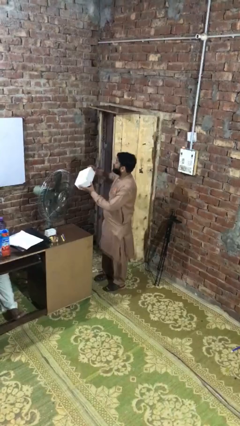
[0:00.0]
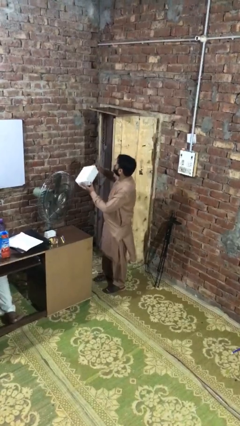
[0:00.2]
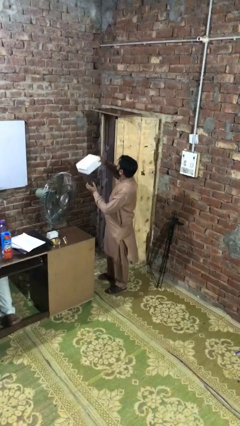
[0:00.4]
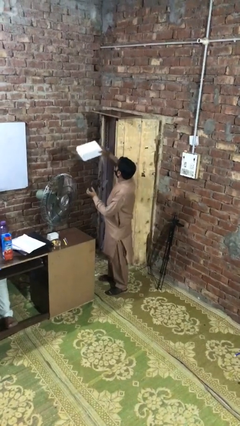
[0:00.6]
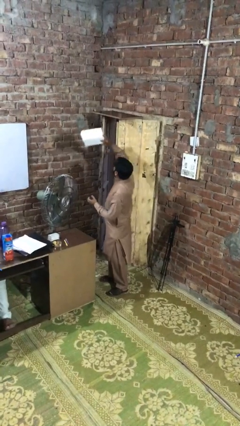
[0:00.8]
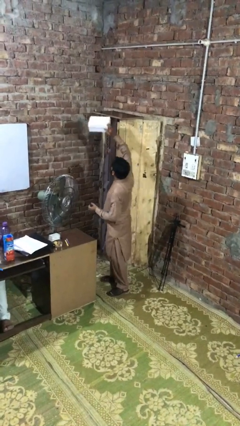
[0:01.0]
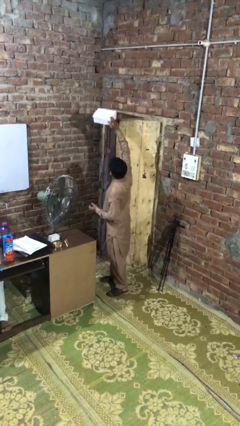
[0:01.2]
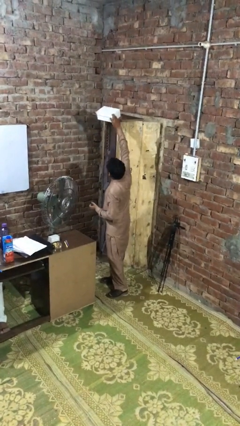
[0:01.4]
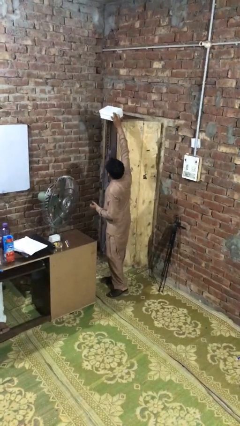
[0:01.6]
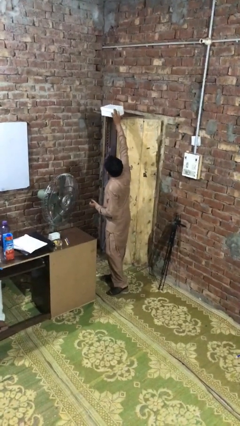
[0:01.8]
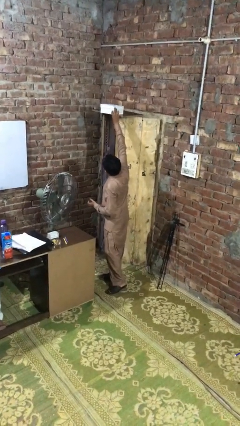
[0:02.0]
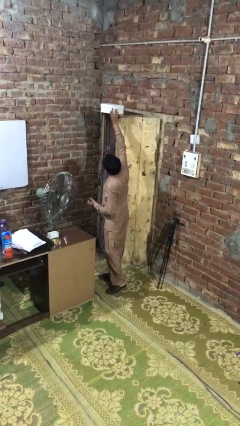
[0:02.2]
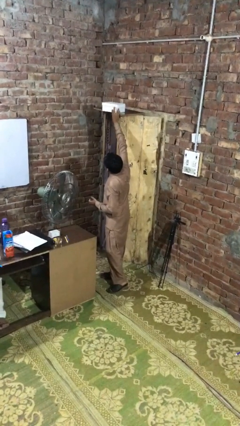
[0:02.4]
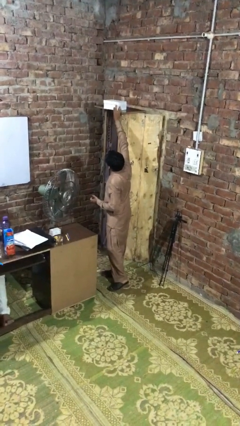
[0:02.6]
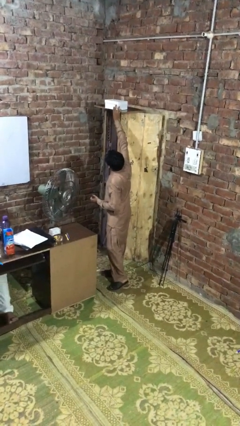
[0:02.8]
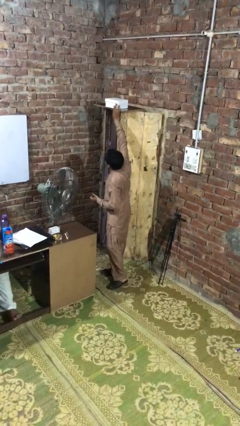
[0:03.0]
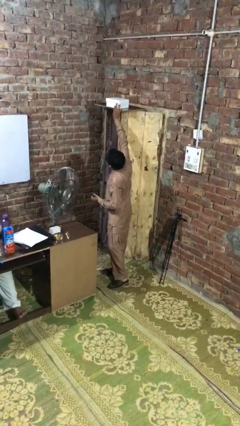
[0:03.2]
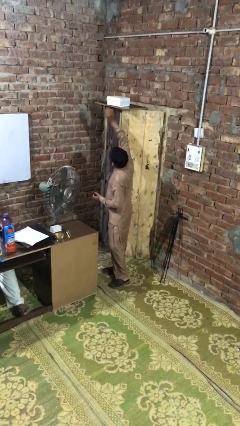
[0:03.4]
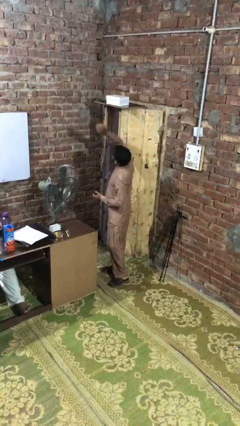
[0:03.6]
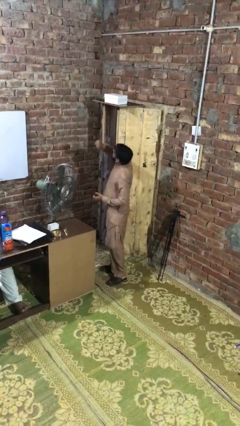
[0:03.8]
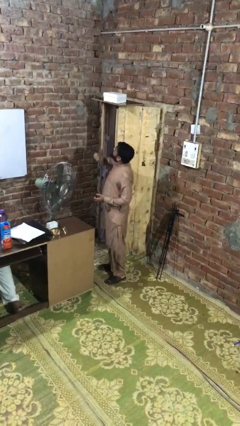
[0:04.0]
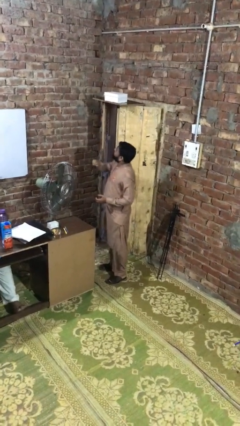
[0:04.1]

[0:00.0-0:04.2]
person puts down object on shelf

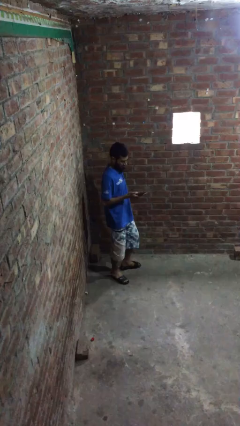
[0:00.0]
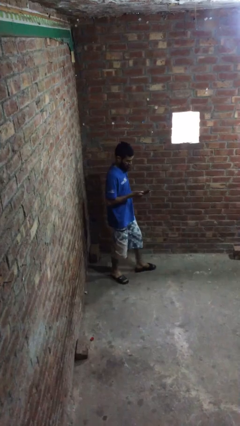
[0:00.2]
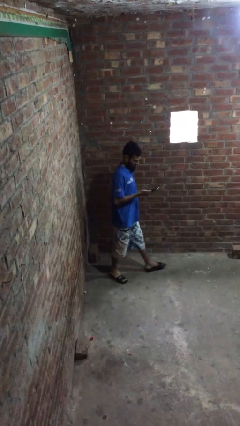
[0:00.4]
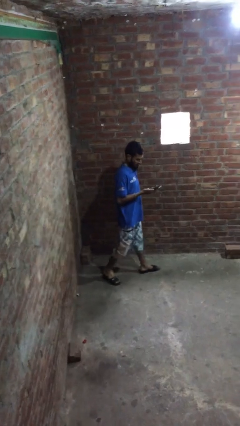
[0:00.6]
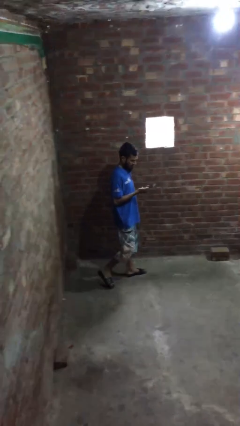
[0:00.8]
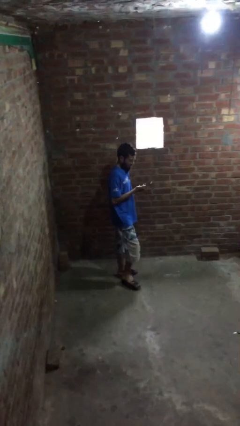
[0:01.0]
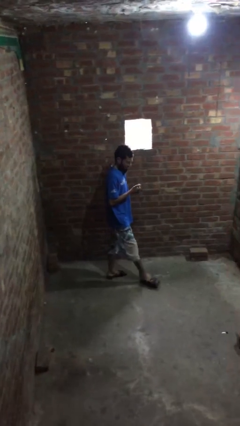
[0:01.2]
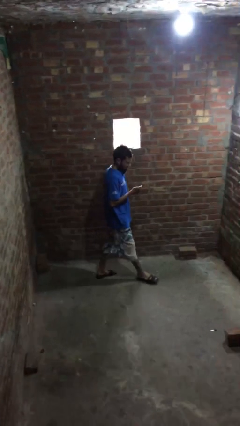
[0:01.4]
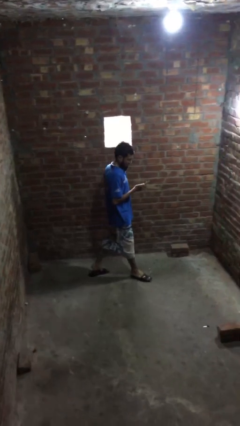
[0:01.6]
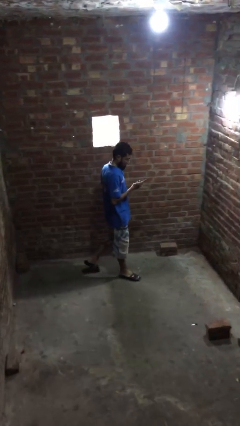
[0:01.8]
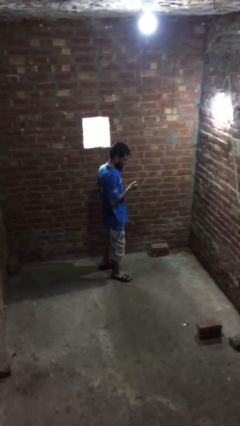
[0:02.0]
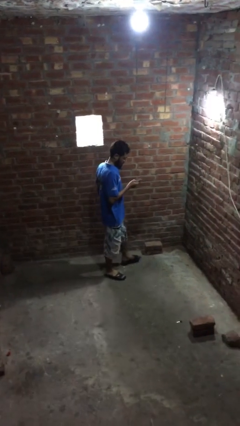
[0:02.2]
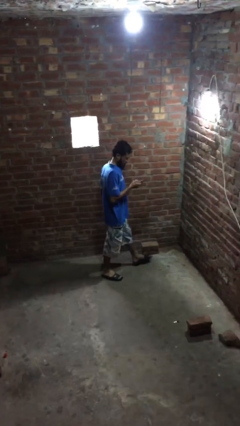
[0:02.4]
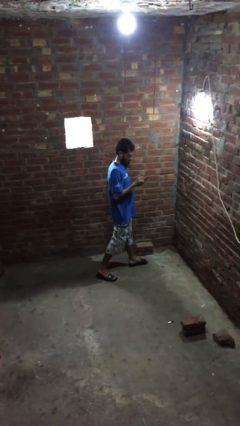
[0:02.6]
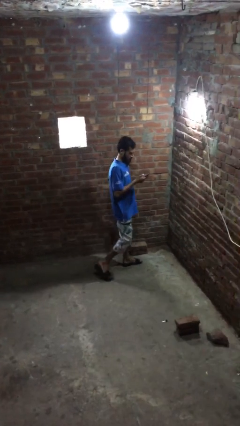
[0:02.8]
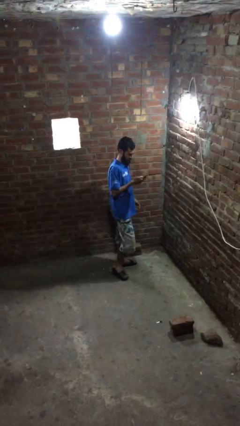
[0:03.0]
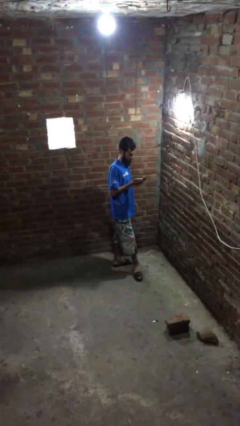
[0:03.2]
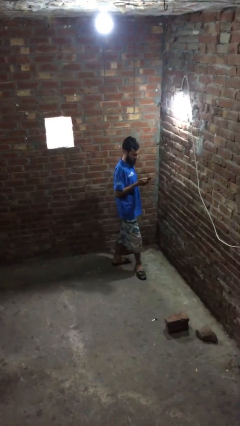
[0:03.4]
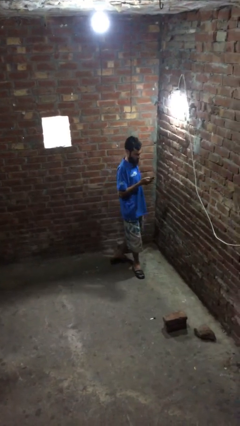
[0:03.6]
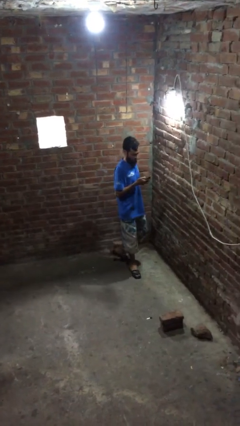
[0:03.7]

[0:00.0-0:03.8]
person texts on phone

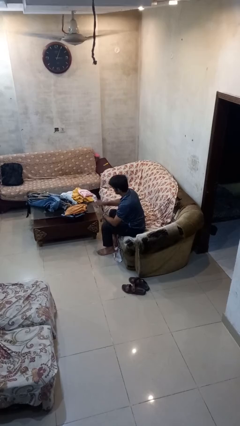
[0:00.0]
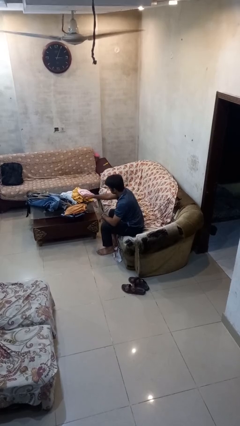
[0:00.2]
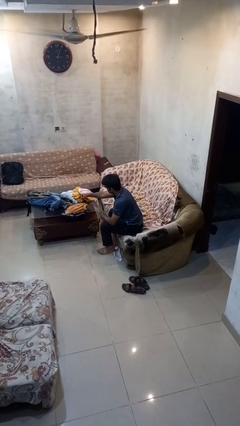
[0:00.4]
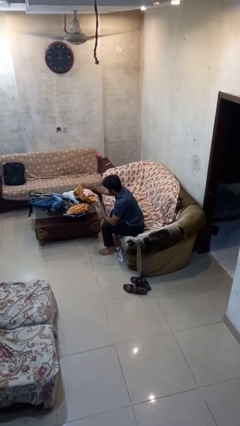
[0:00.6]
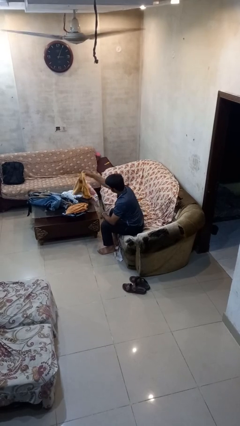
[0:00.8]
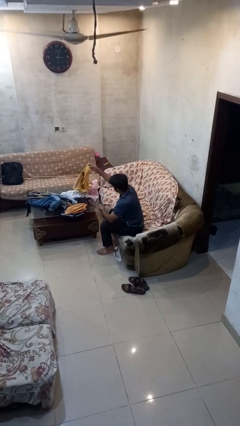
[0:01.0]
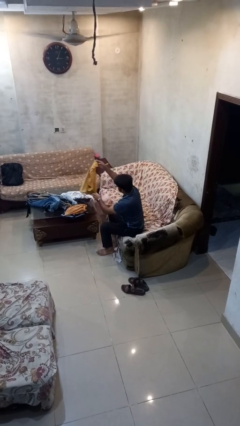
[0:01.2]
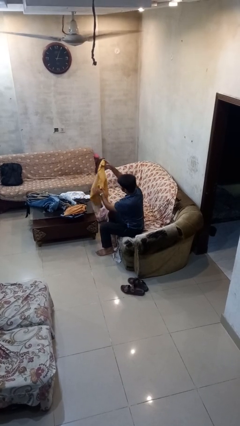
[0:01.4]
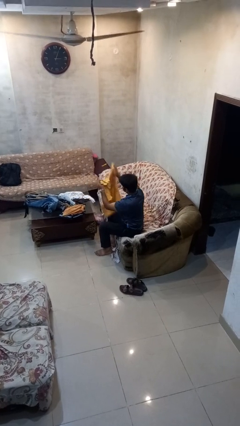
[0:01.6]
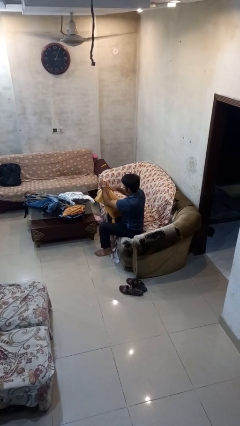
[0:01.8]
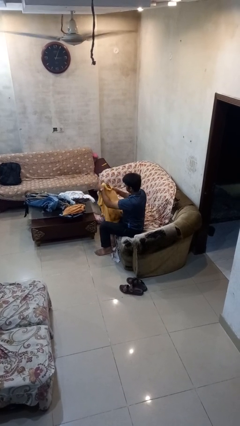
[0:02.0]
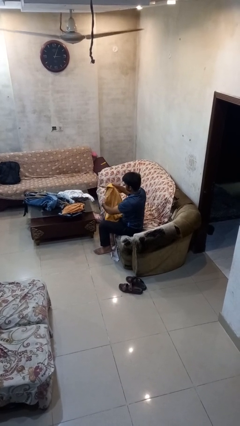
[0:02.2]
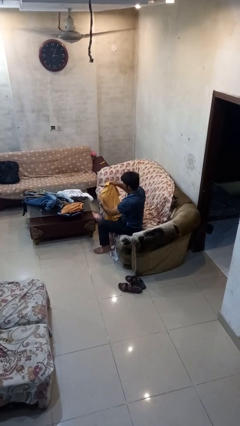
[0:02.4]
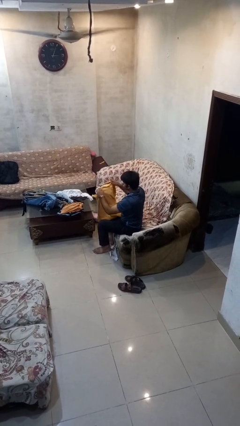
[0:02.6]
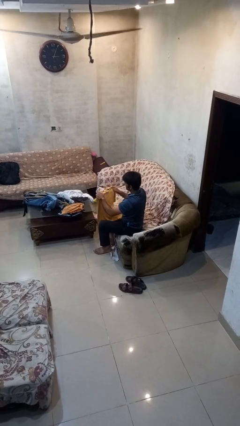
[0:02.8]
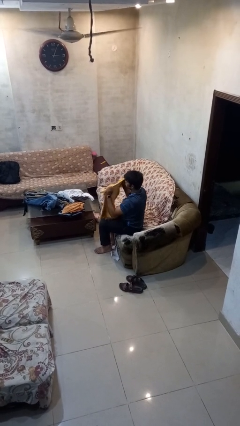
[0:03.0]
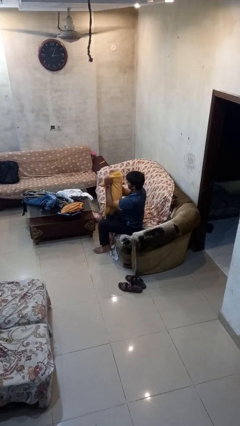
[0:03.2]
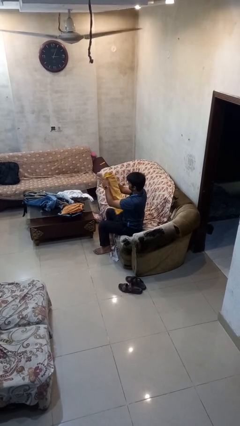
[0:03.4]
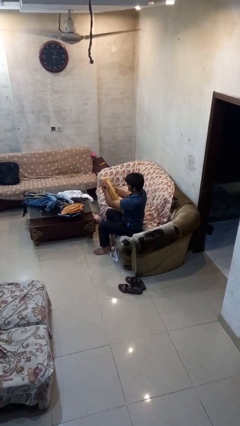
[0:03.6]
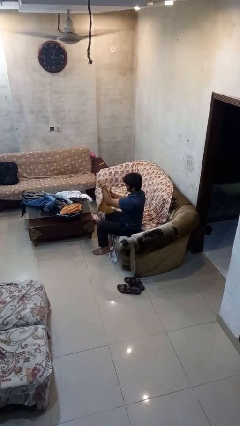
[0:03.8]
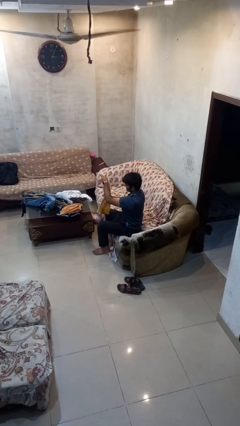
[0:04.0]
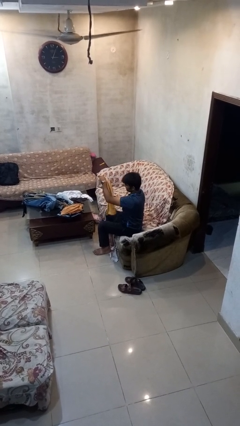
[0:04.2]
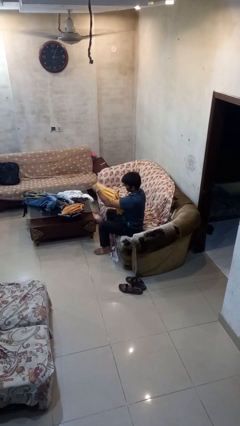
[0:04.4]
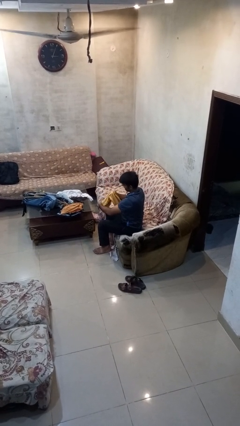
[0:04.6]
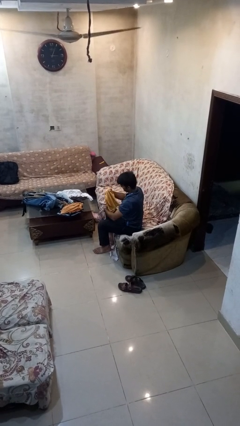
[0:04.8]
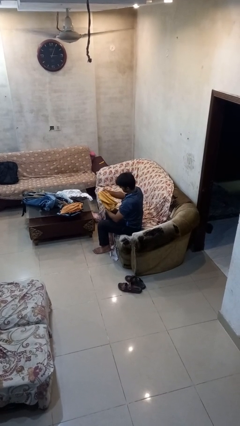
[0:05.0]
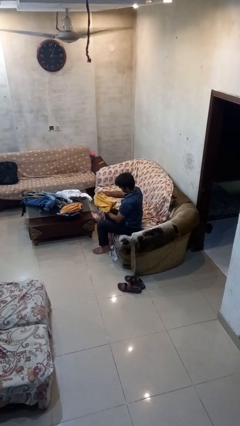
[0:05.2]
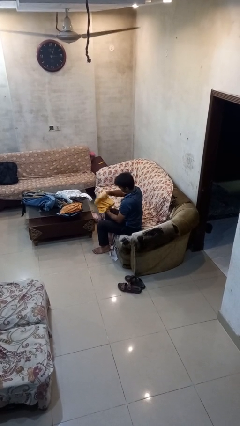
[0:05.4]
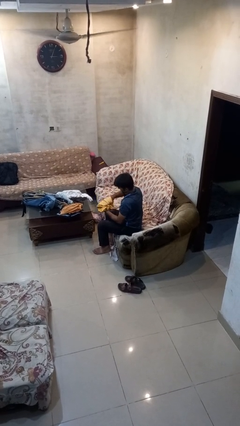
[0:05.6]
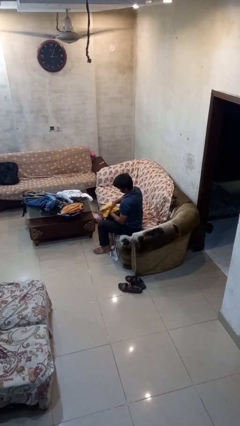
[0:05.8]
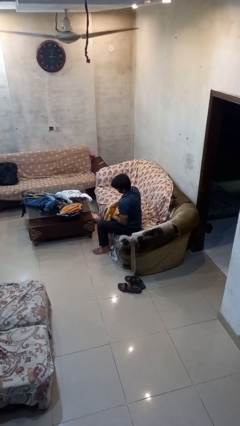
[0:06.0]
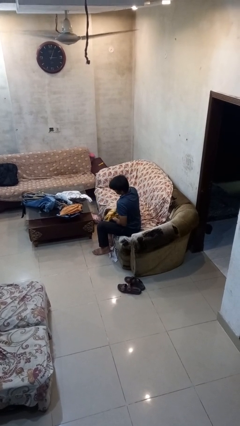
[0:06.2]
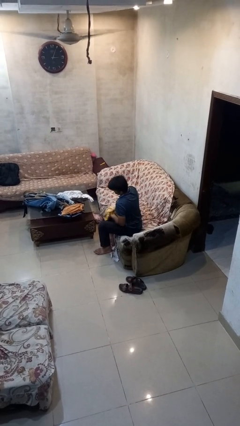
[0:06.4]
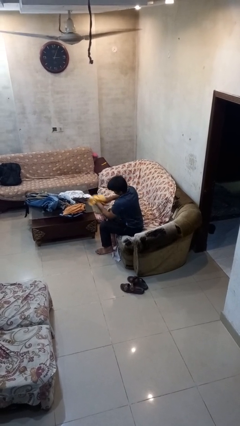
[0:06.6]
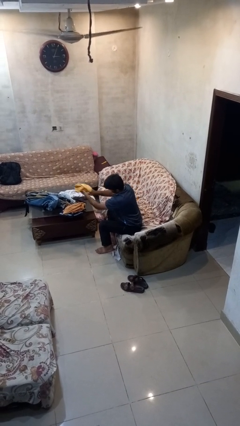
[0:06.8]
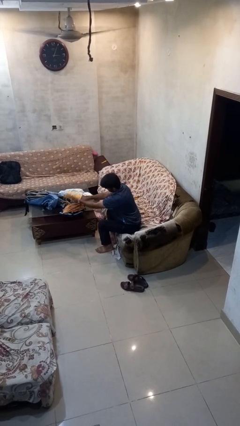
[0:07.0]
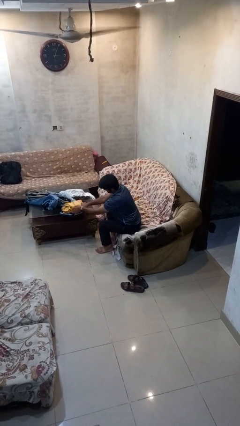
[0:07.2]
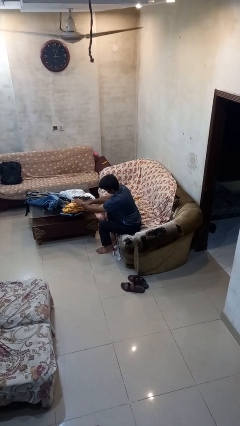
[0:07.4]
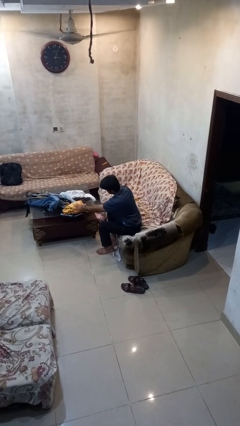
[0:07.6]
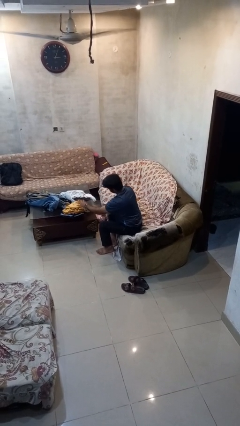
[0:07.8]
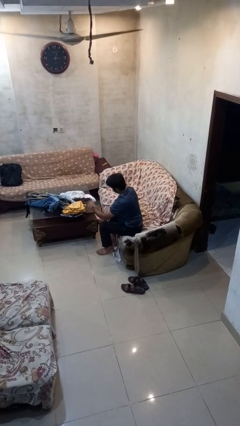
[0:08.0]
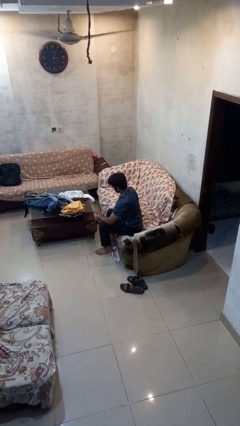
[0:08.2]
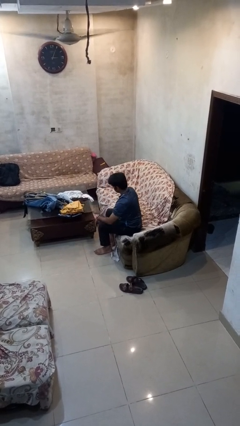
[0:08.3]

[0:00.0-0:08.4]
person folds shirt

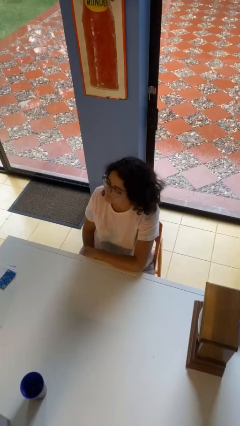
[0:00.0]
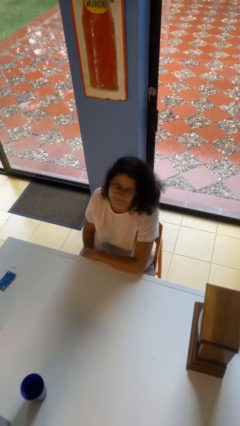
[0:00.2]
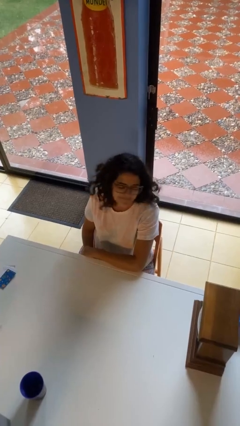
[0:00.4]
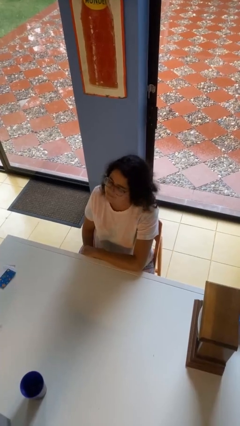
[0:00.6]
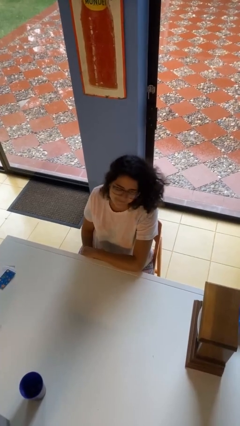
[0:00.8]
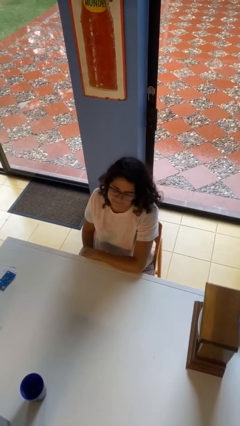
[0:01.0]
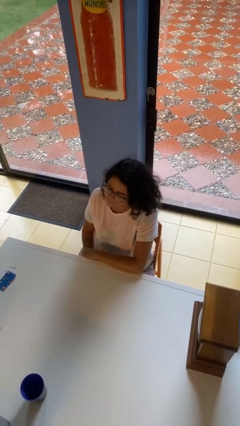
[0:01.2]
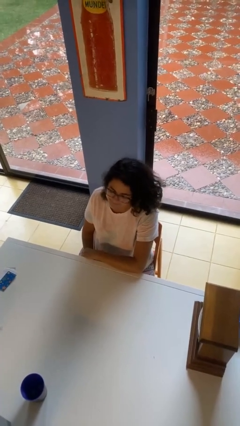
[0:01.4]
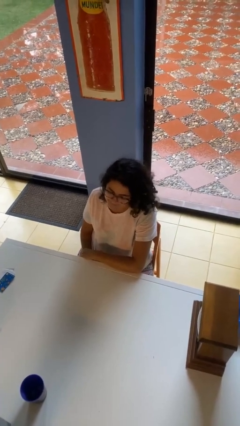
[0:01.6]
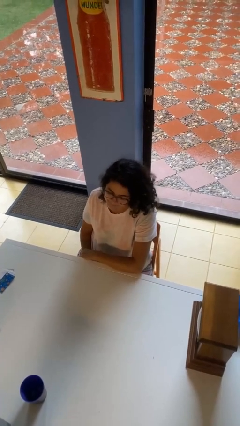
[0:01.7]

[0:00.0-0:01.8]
person shakes head
